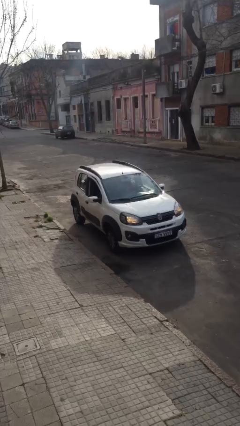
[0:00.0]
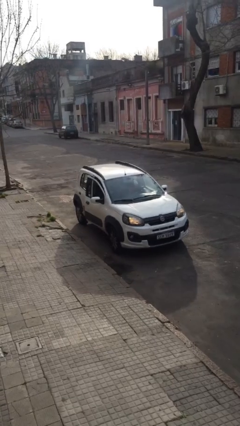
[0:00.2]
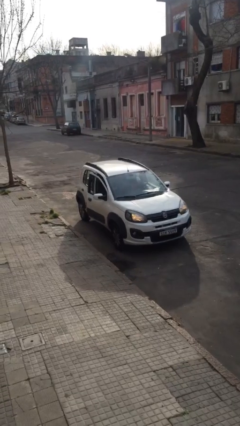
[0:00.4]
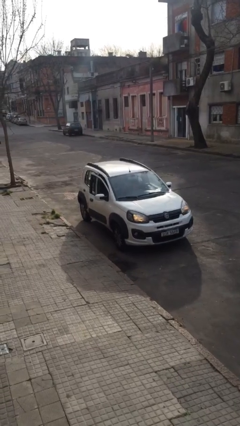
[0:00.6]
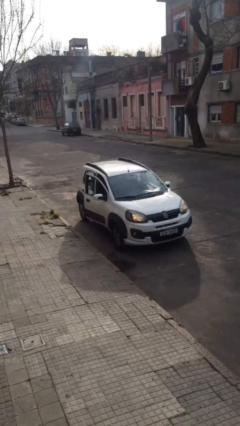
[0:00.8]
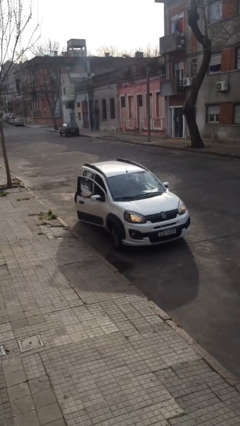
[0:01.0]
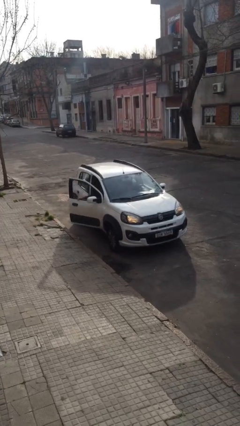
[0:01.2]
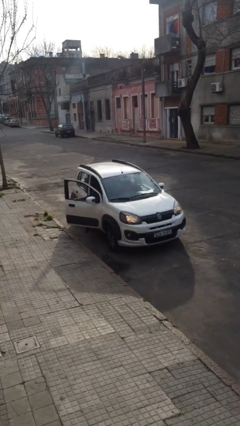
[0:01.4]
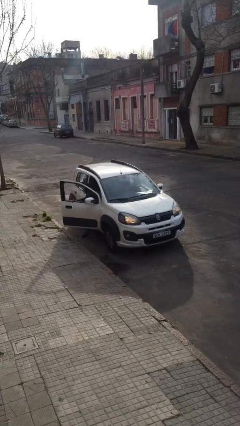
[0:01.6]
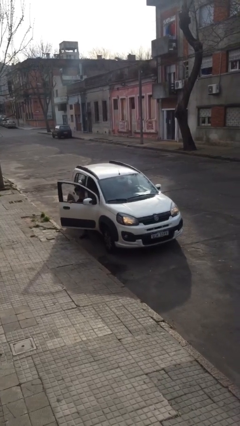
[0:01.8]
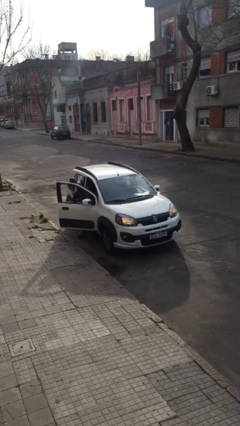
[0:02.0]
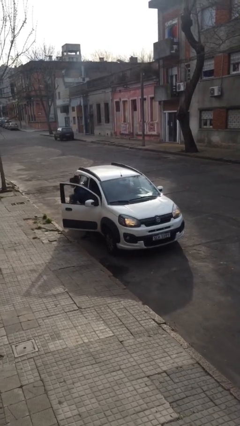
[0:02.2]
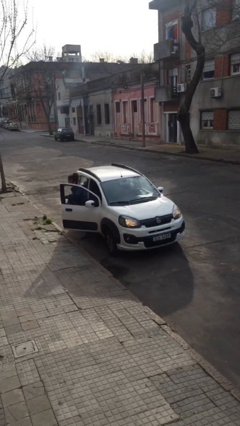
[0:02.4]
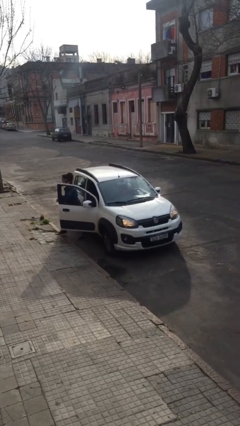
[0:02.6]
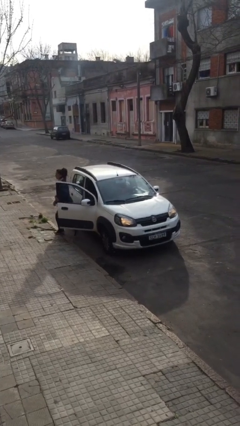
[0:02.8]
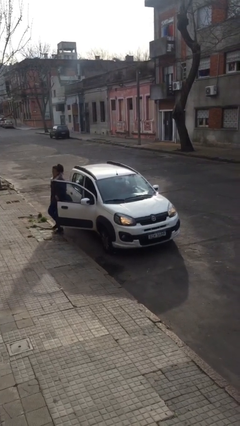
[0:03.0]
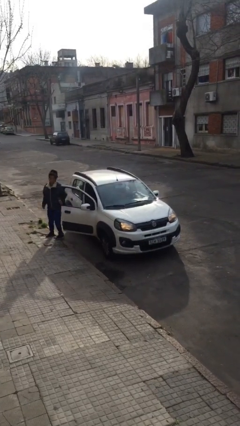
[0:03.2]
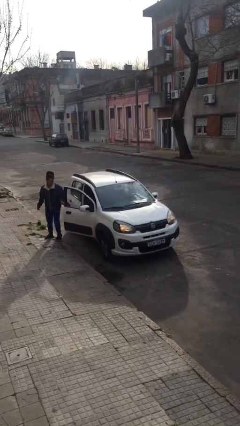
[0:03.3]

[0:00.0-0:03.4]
car drops off person

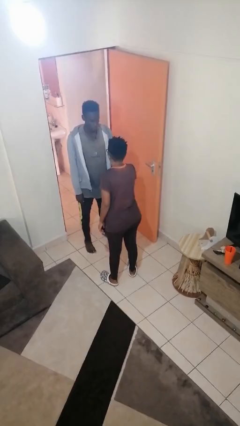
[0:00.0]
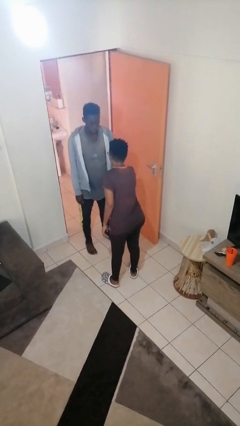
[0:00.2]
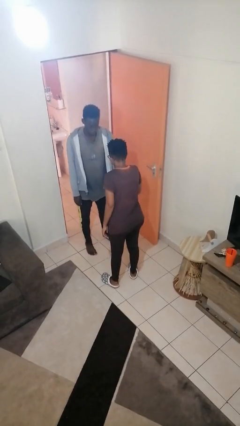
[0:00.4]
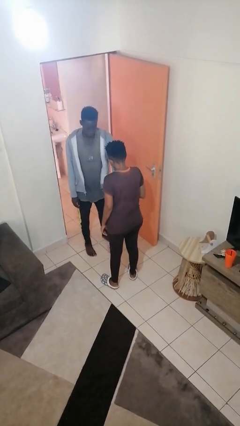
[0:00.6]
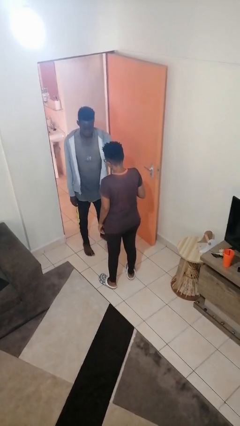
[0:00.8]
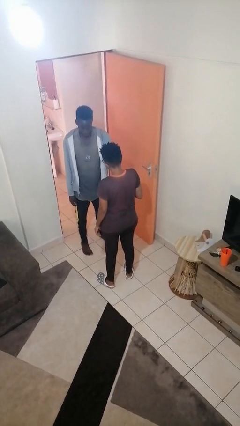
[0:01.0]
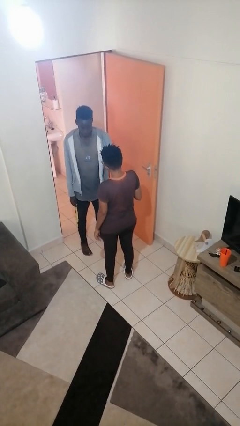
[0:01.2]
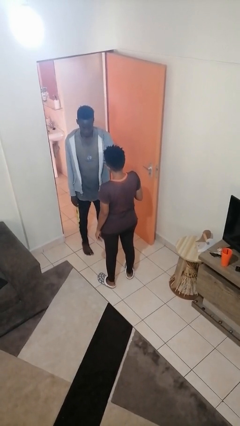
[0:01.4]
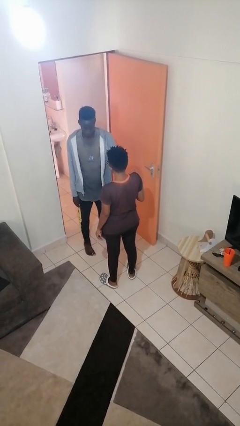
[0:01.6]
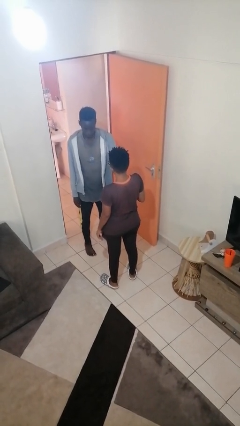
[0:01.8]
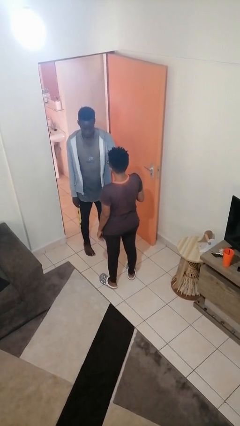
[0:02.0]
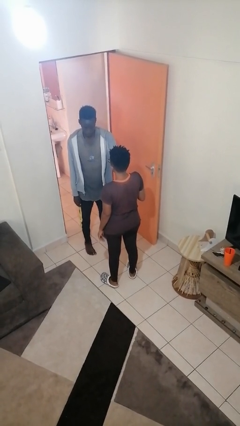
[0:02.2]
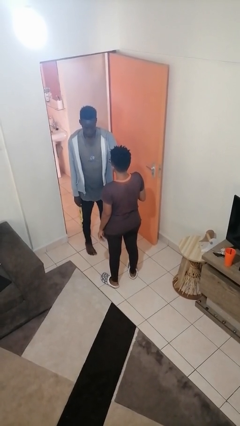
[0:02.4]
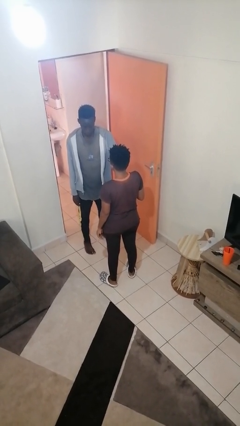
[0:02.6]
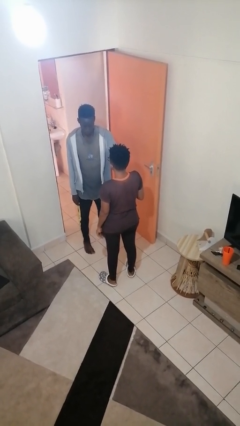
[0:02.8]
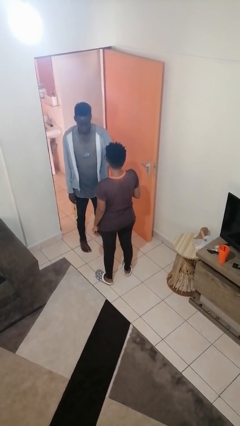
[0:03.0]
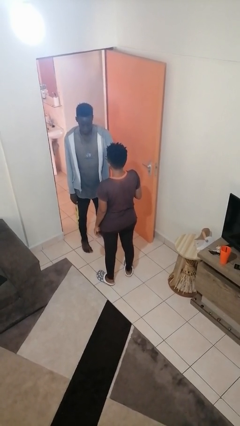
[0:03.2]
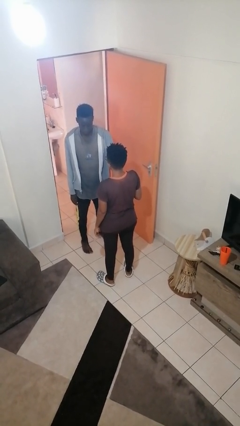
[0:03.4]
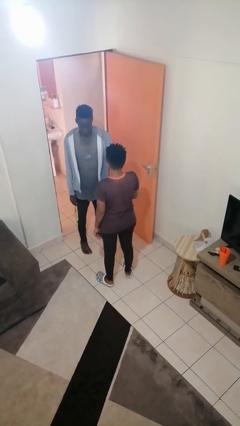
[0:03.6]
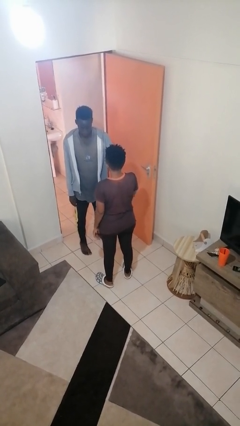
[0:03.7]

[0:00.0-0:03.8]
person grabs person by forearm

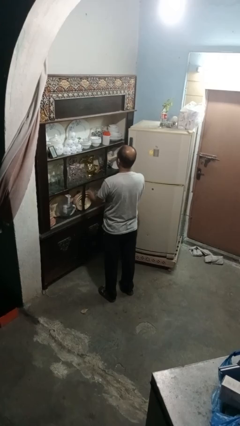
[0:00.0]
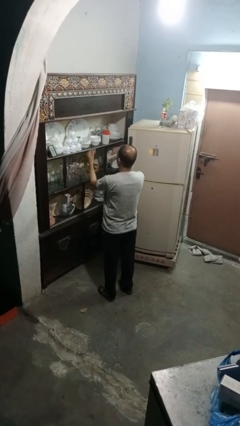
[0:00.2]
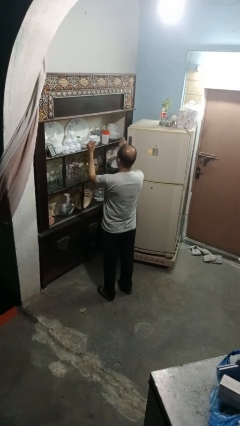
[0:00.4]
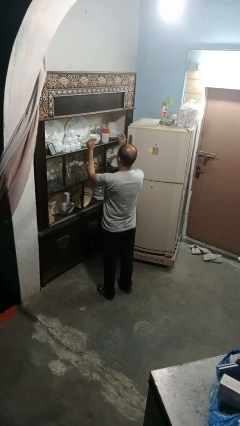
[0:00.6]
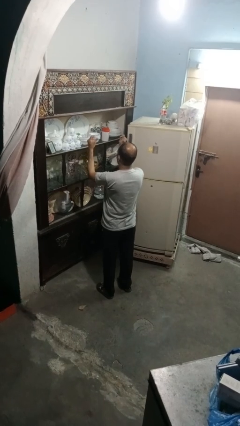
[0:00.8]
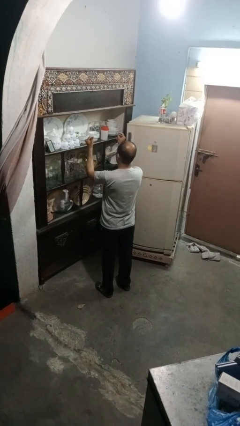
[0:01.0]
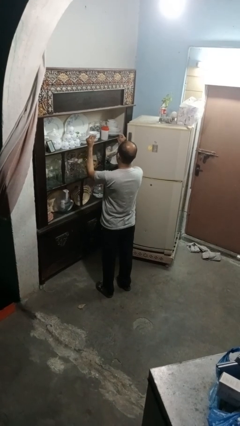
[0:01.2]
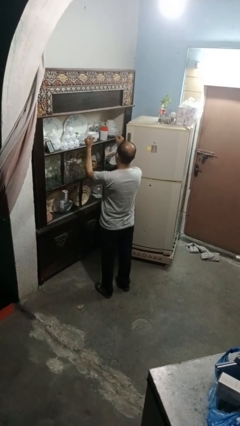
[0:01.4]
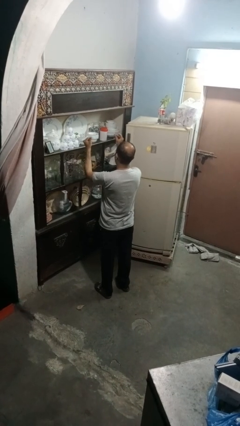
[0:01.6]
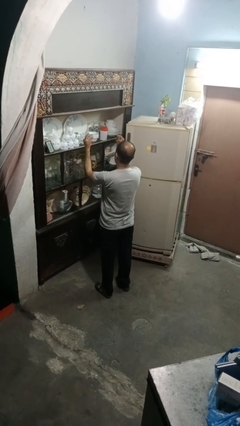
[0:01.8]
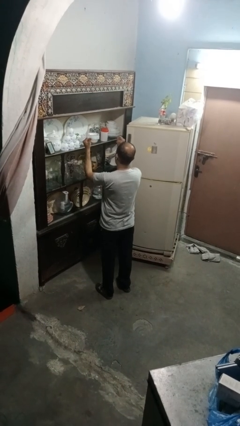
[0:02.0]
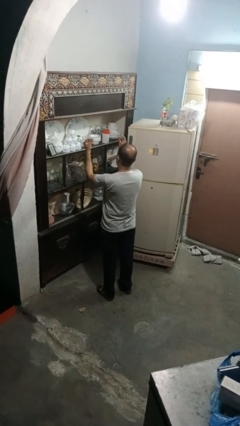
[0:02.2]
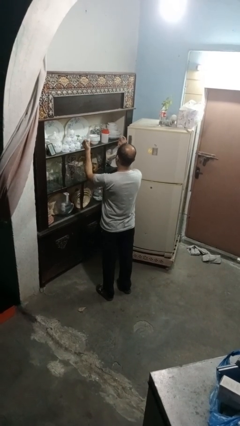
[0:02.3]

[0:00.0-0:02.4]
person snaps fingers

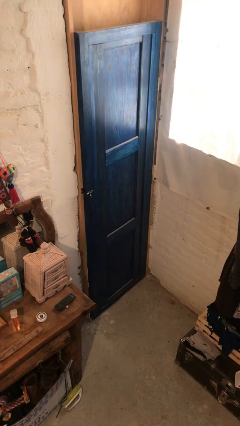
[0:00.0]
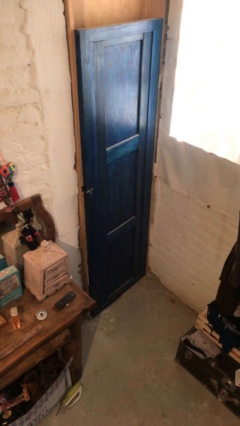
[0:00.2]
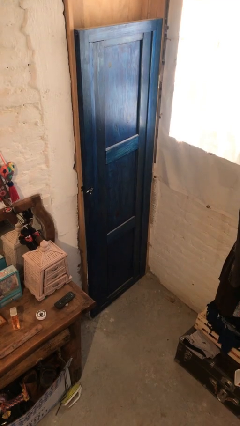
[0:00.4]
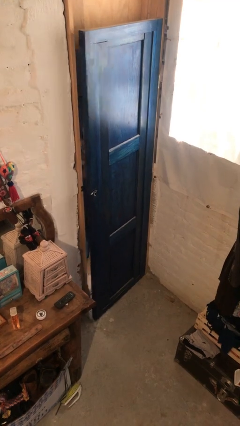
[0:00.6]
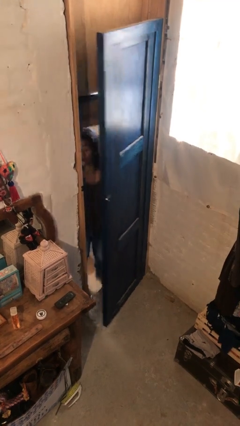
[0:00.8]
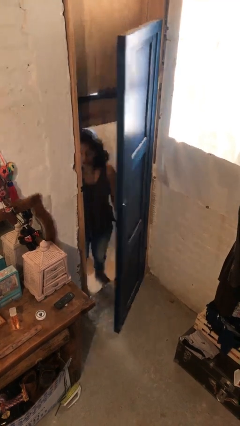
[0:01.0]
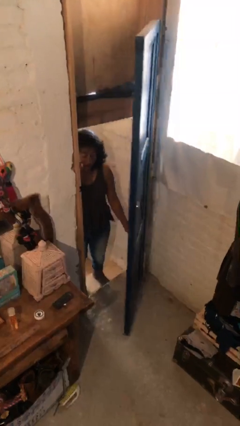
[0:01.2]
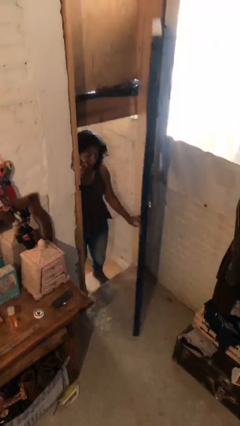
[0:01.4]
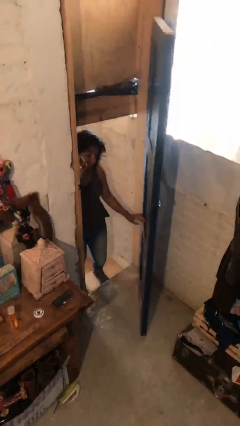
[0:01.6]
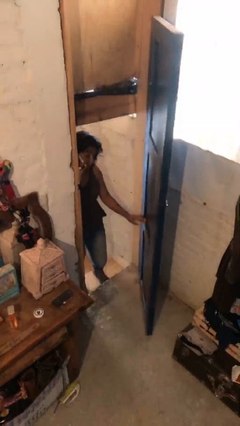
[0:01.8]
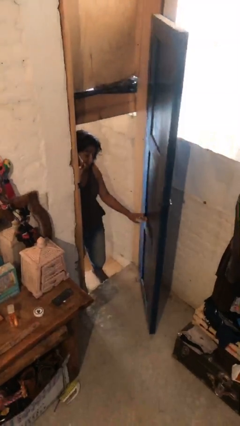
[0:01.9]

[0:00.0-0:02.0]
person opens facility door

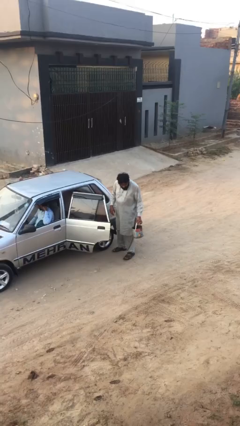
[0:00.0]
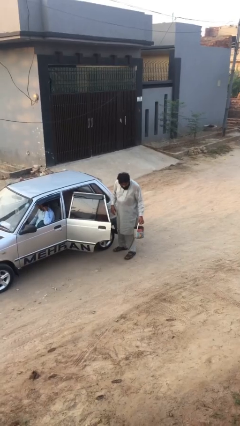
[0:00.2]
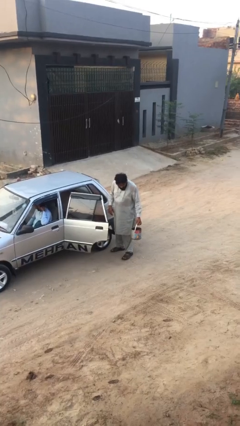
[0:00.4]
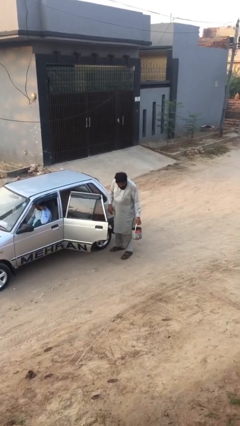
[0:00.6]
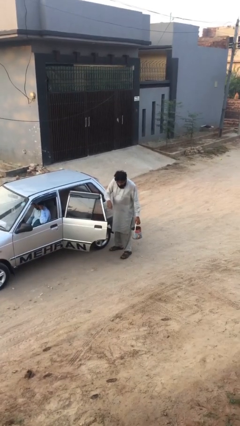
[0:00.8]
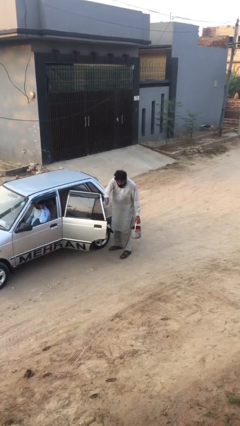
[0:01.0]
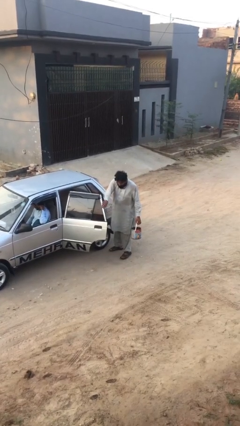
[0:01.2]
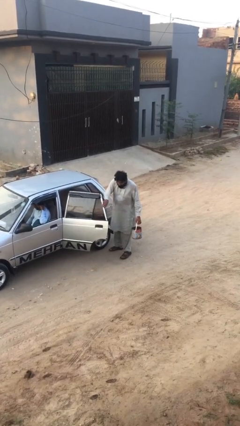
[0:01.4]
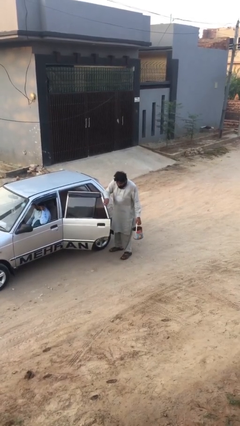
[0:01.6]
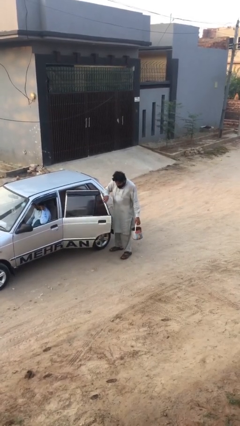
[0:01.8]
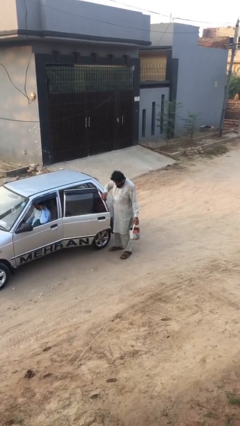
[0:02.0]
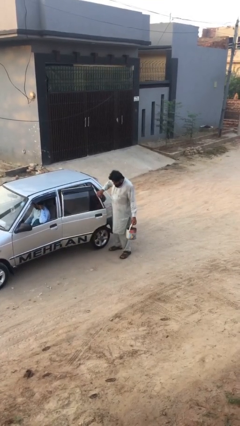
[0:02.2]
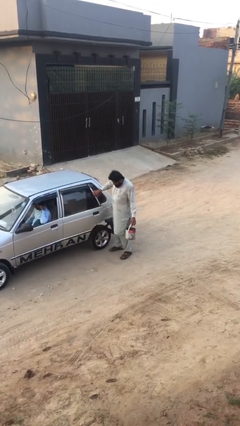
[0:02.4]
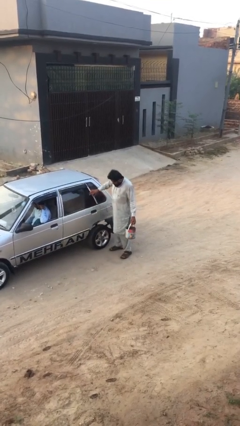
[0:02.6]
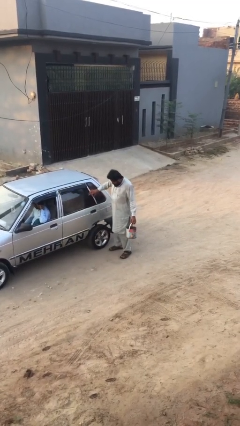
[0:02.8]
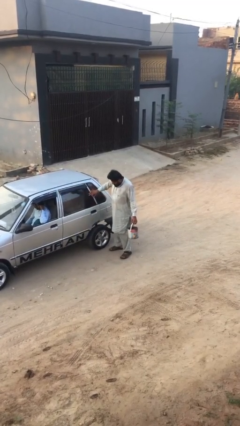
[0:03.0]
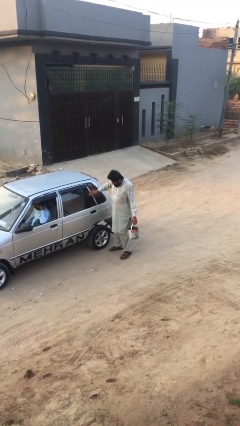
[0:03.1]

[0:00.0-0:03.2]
person closes car door

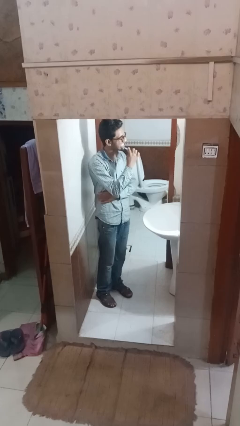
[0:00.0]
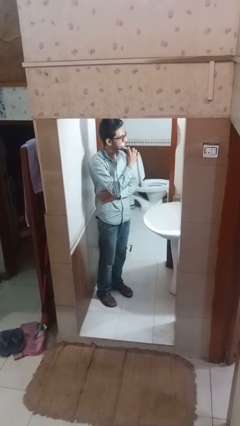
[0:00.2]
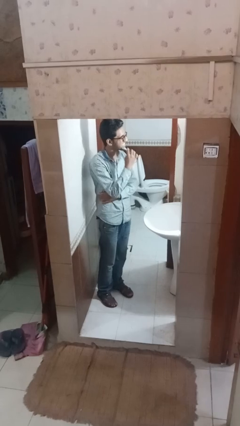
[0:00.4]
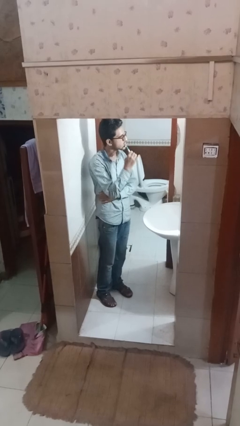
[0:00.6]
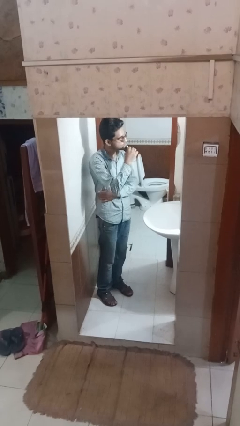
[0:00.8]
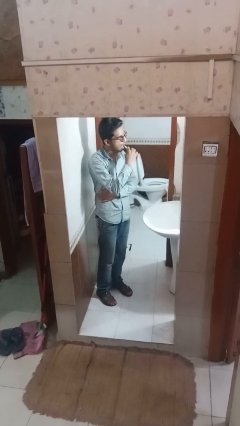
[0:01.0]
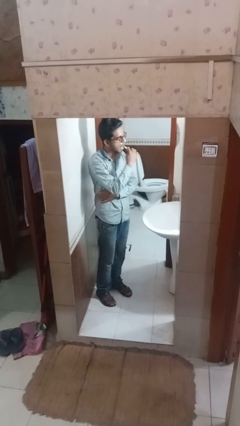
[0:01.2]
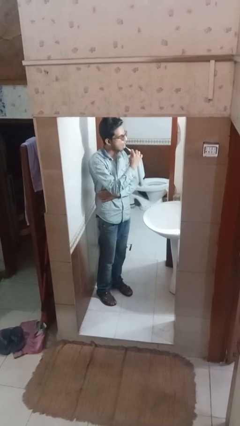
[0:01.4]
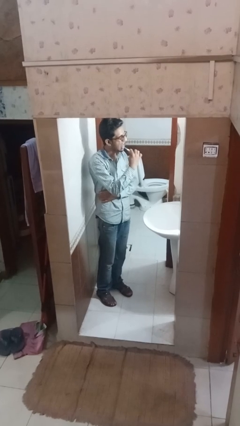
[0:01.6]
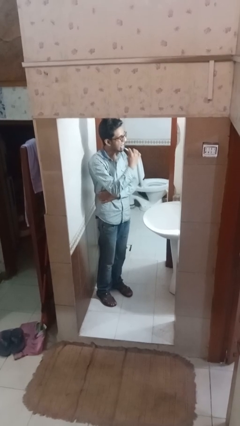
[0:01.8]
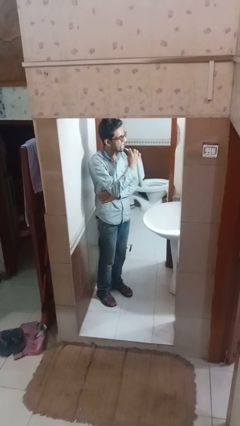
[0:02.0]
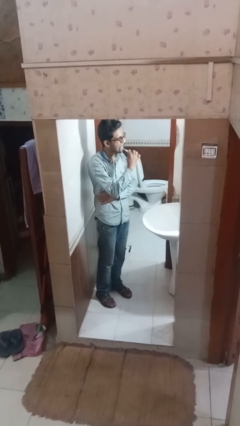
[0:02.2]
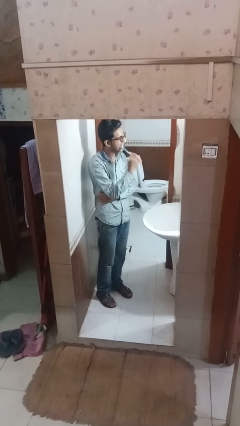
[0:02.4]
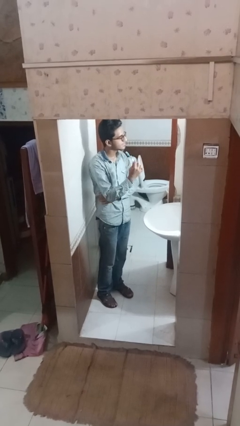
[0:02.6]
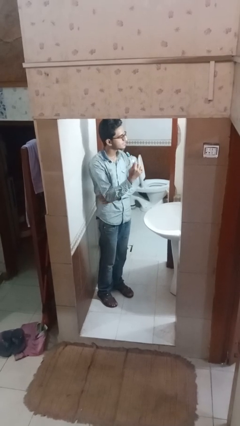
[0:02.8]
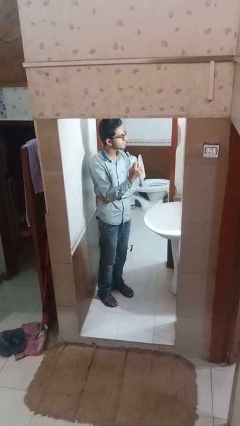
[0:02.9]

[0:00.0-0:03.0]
person brushes teeth
